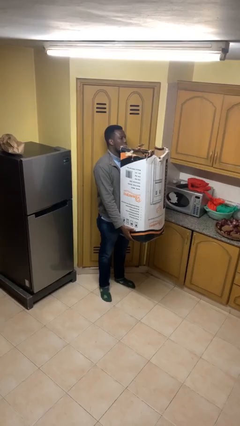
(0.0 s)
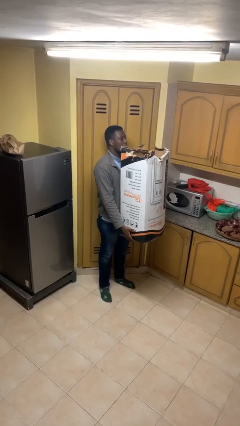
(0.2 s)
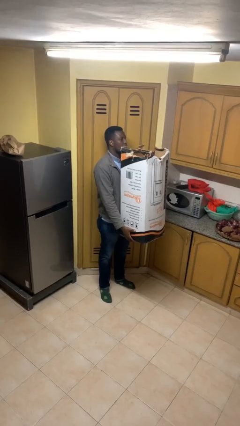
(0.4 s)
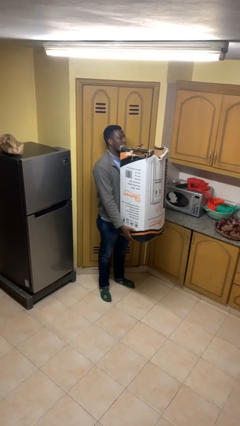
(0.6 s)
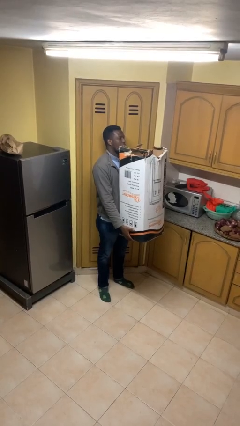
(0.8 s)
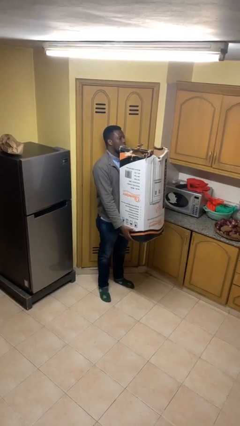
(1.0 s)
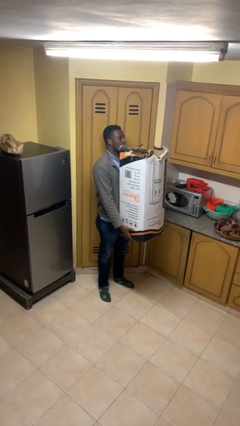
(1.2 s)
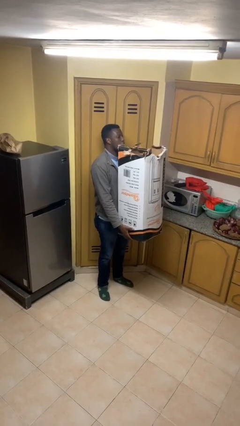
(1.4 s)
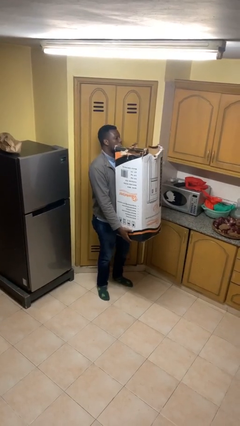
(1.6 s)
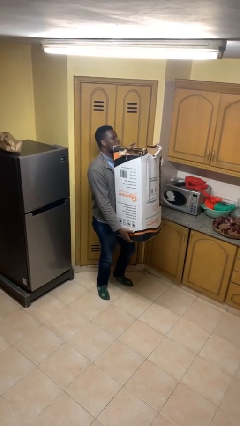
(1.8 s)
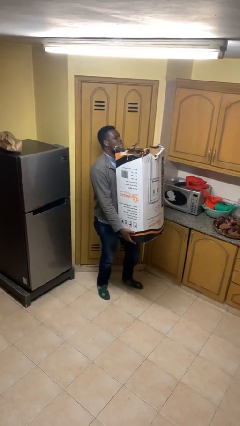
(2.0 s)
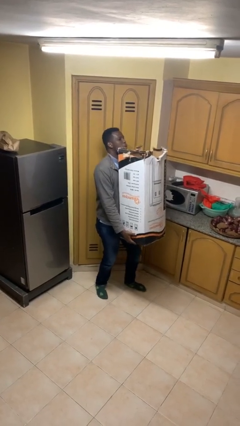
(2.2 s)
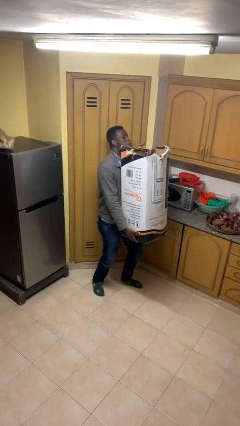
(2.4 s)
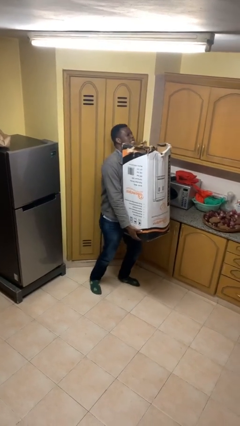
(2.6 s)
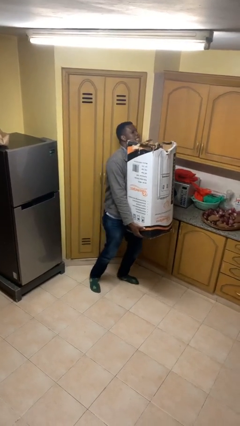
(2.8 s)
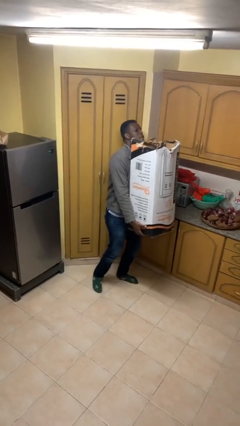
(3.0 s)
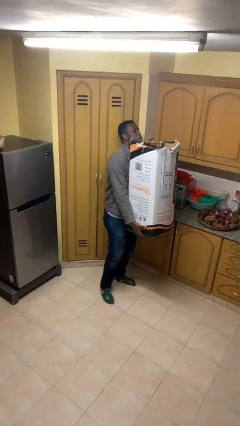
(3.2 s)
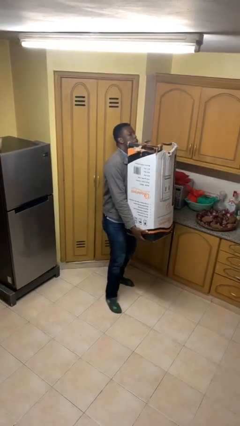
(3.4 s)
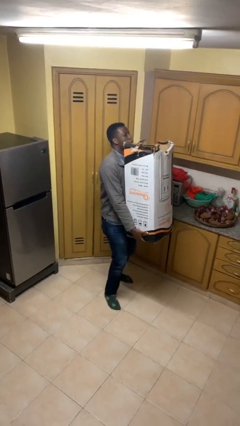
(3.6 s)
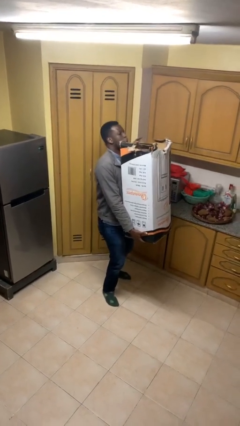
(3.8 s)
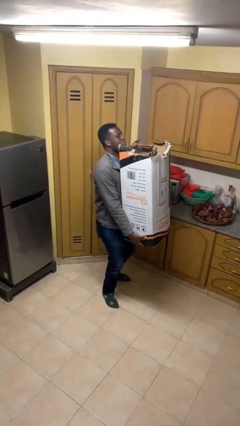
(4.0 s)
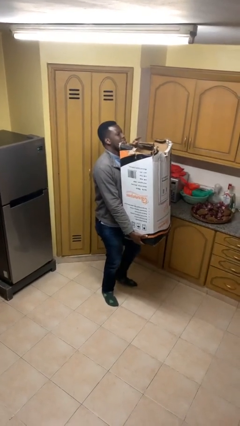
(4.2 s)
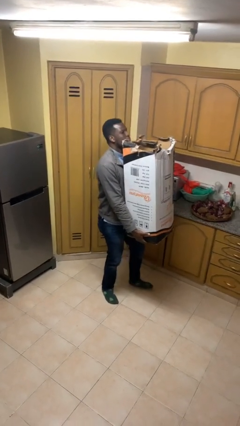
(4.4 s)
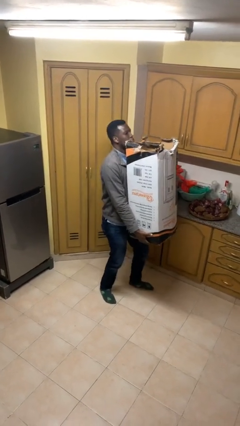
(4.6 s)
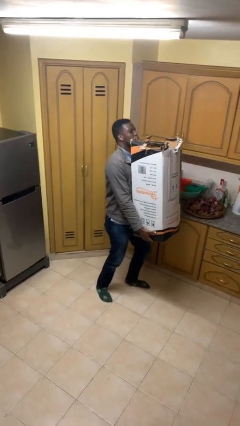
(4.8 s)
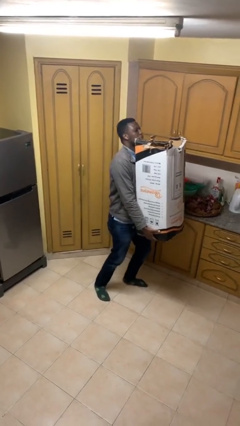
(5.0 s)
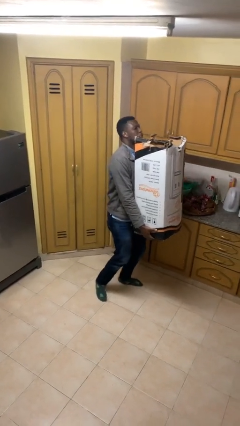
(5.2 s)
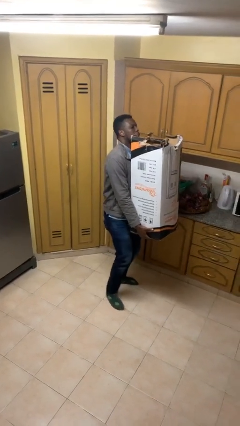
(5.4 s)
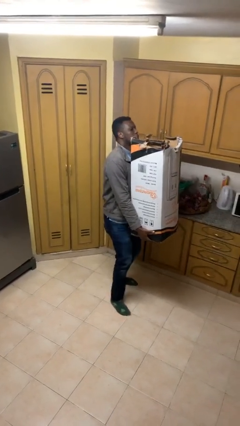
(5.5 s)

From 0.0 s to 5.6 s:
person carries heavy object

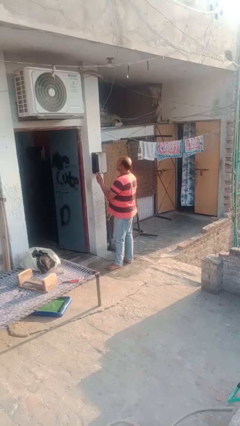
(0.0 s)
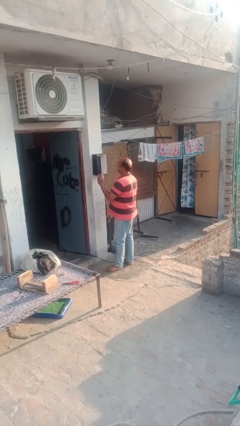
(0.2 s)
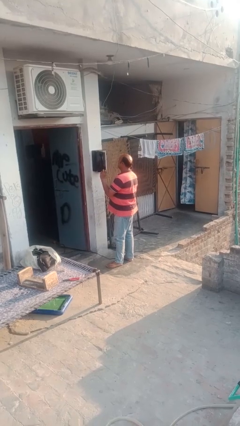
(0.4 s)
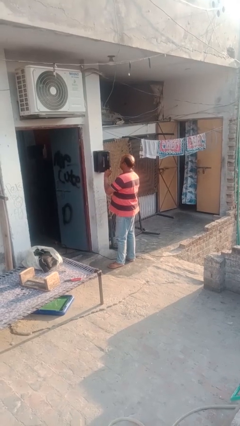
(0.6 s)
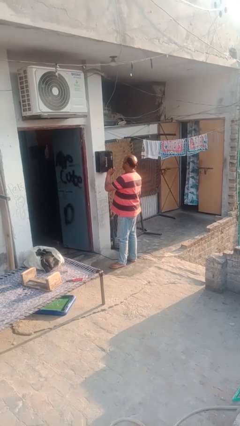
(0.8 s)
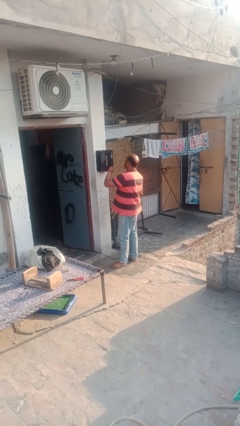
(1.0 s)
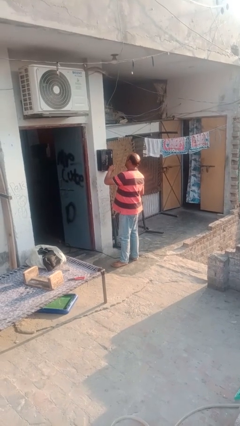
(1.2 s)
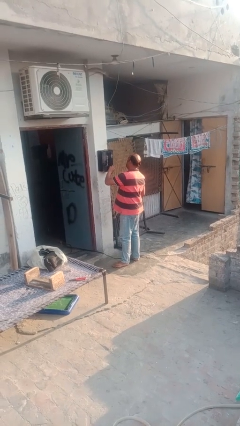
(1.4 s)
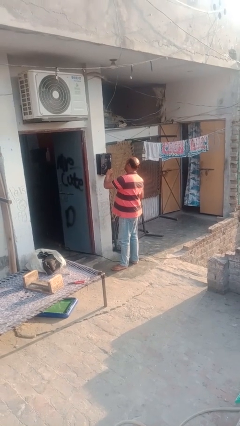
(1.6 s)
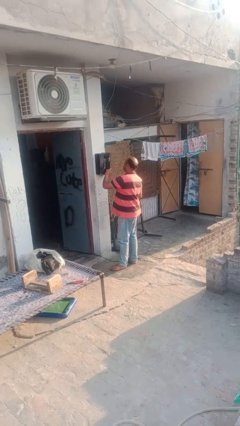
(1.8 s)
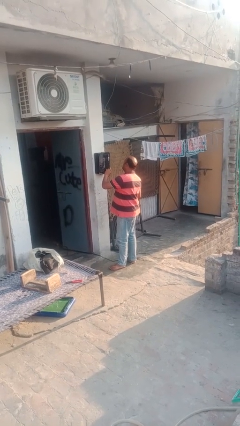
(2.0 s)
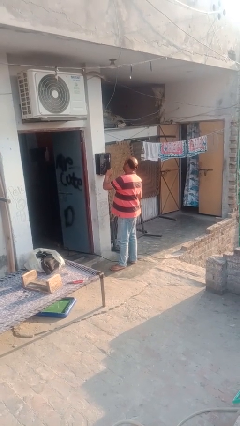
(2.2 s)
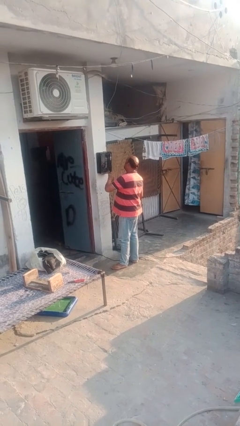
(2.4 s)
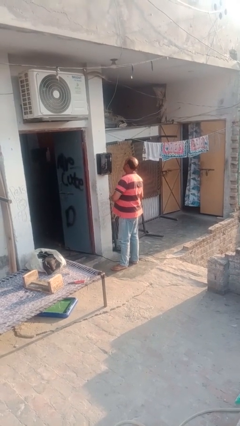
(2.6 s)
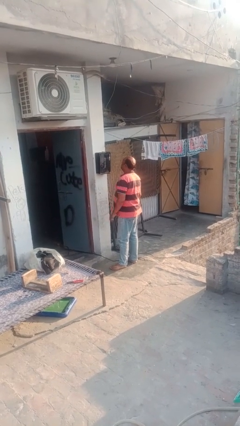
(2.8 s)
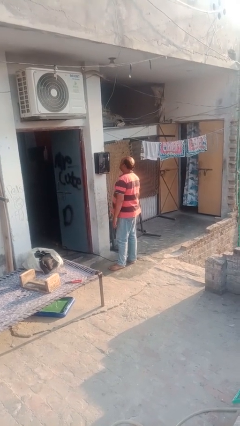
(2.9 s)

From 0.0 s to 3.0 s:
person closes mailbox

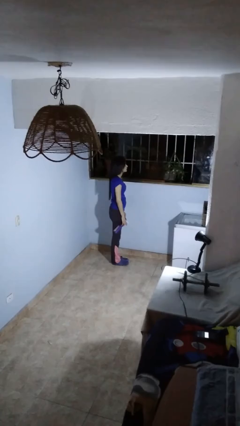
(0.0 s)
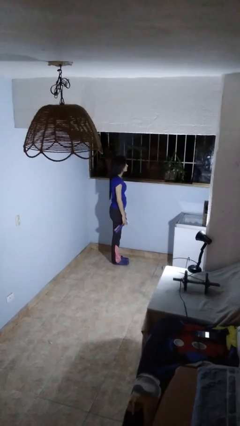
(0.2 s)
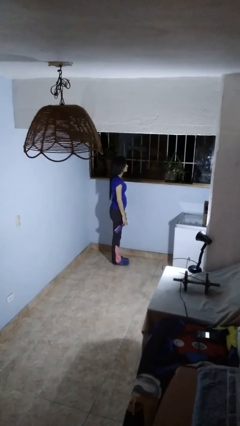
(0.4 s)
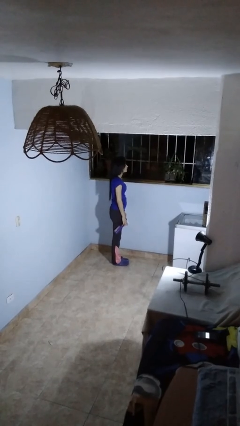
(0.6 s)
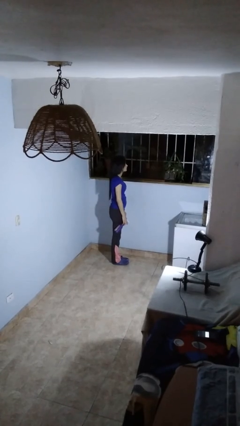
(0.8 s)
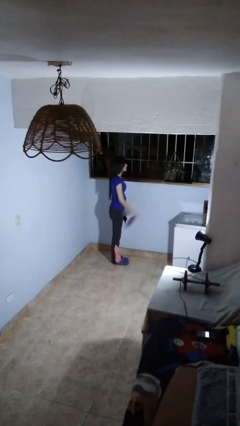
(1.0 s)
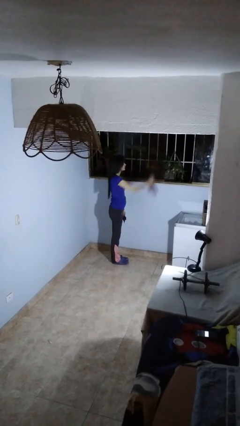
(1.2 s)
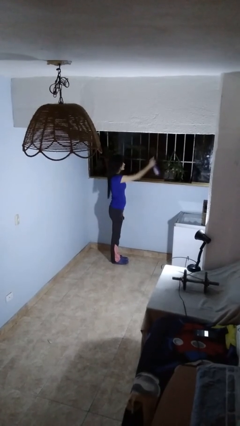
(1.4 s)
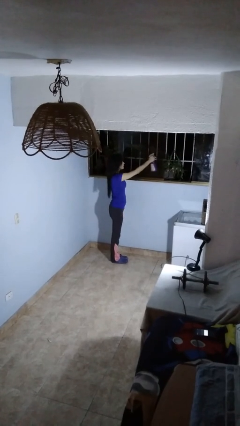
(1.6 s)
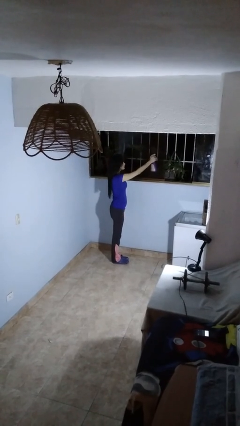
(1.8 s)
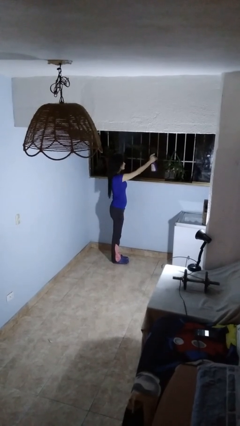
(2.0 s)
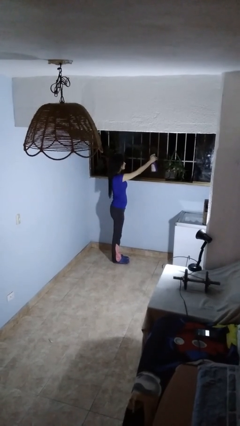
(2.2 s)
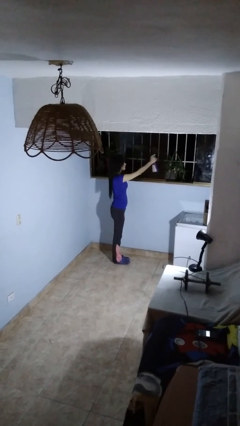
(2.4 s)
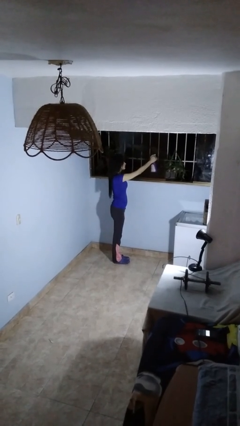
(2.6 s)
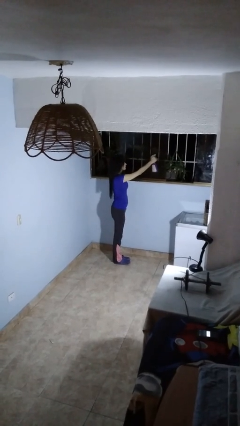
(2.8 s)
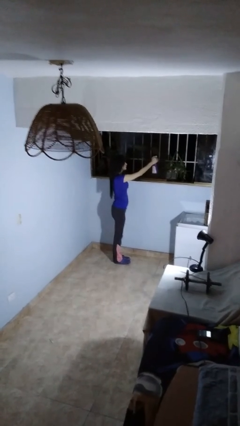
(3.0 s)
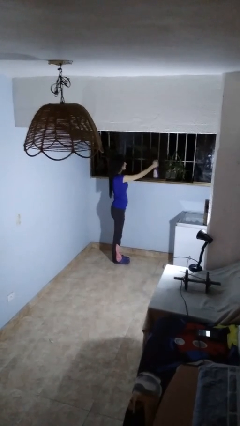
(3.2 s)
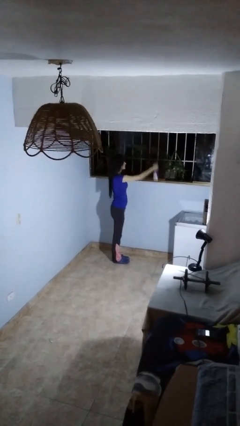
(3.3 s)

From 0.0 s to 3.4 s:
person sprays from bottle

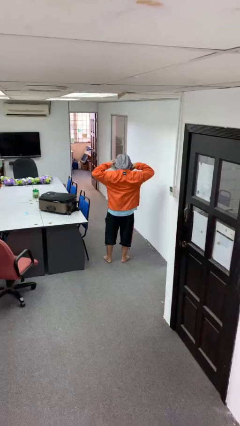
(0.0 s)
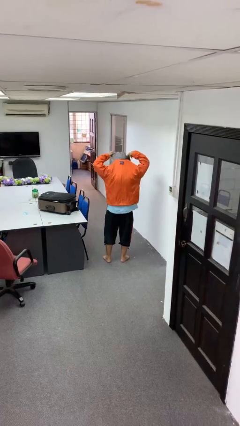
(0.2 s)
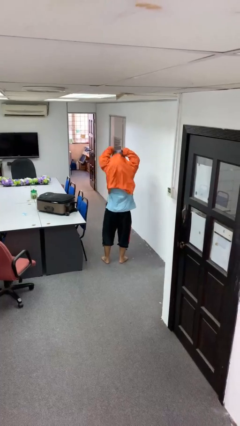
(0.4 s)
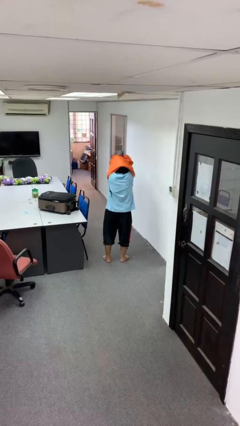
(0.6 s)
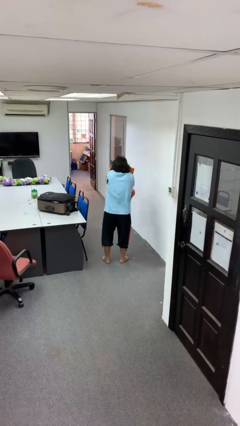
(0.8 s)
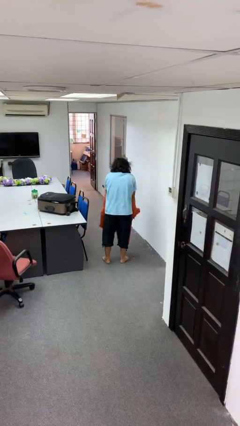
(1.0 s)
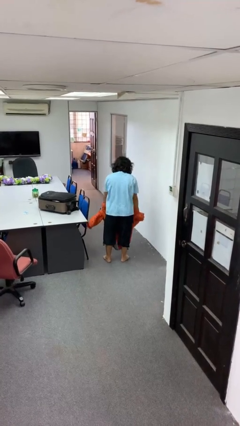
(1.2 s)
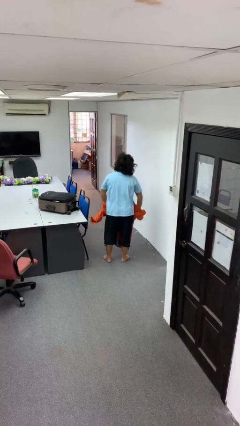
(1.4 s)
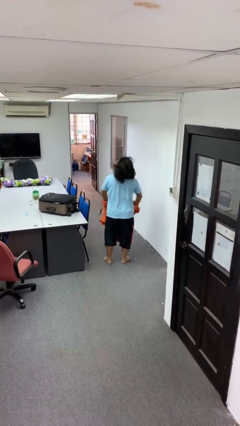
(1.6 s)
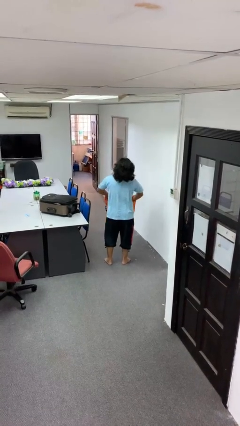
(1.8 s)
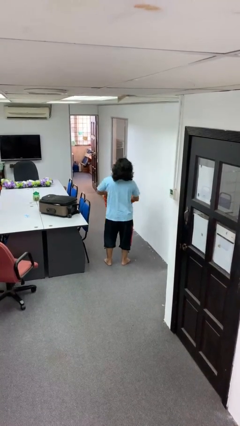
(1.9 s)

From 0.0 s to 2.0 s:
person takes off hoodie

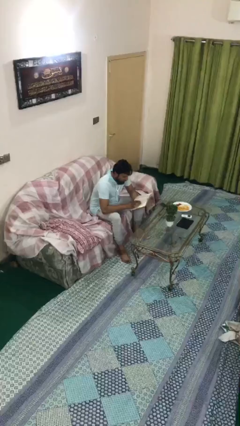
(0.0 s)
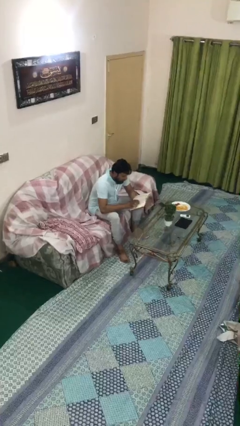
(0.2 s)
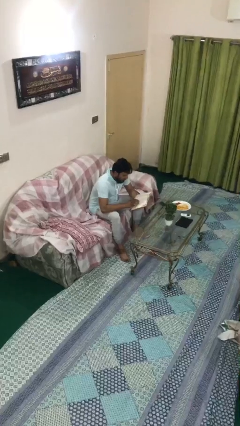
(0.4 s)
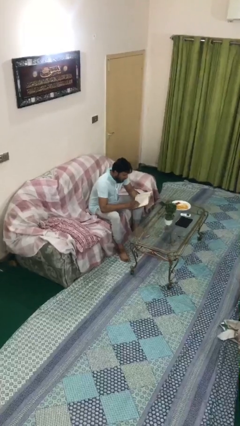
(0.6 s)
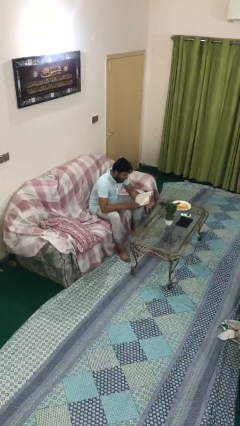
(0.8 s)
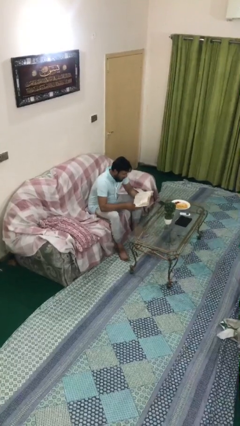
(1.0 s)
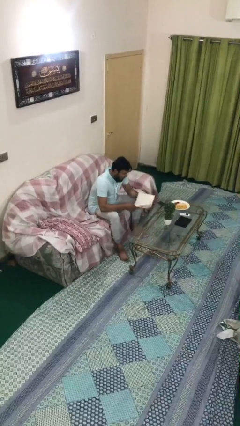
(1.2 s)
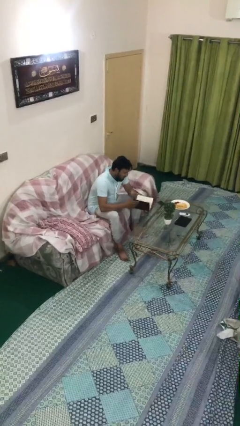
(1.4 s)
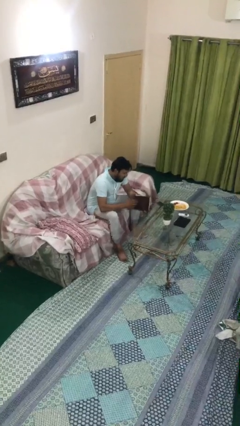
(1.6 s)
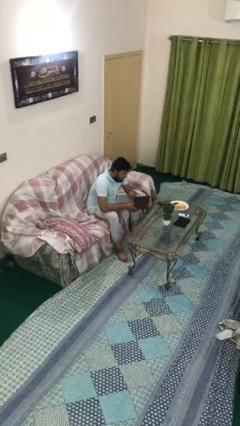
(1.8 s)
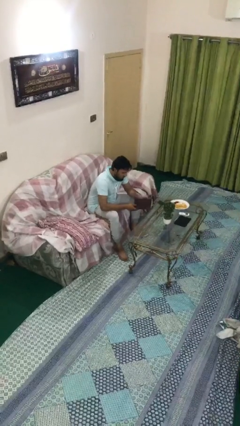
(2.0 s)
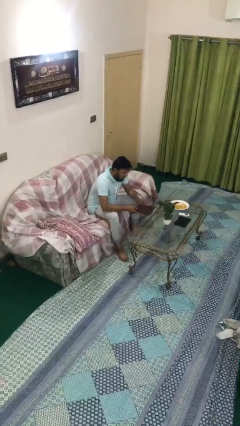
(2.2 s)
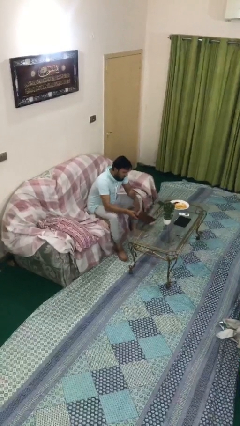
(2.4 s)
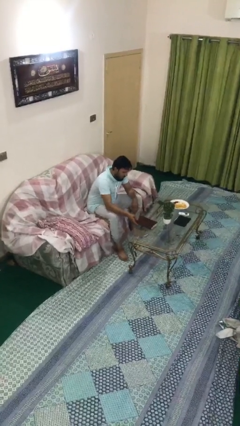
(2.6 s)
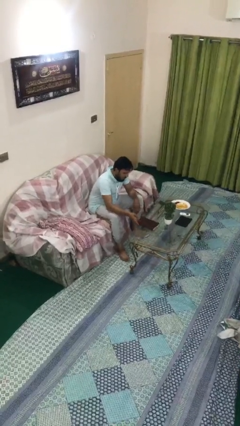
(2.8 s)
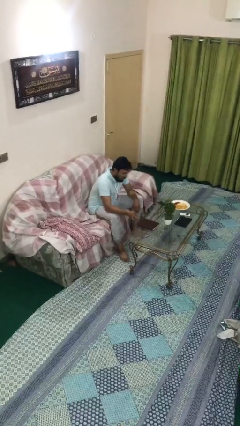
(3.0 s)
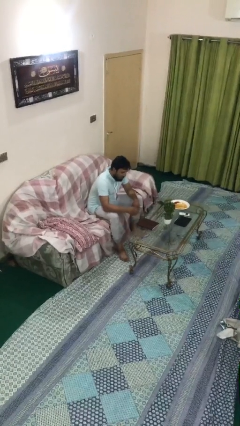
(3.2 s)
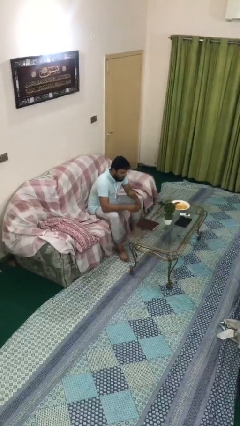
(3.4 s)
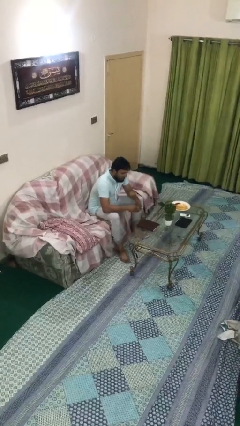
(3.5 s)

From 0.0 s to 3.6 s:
person puts down object on table
